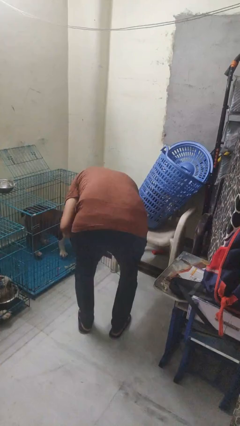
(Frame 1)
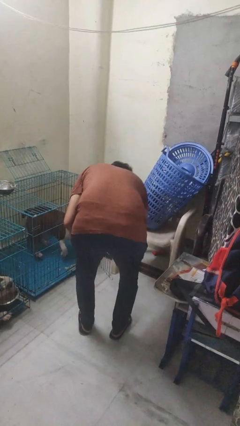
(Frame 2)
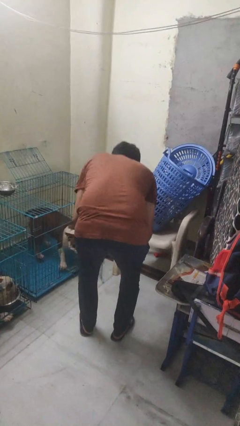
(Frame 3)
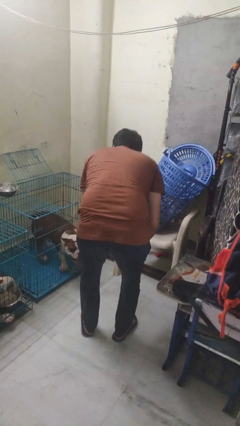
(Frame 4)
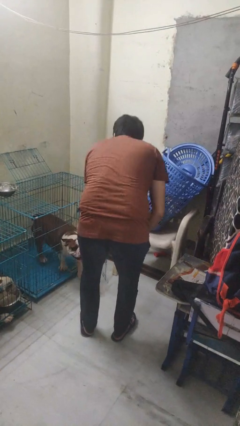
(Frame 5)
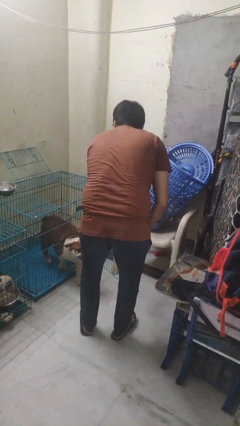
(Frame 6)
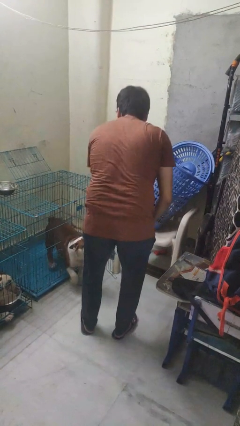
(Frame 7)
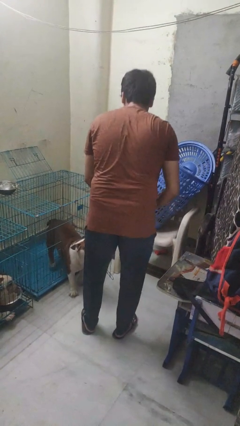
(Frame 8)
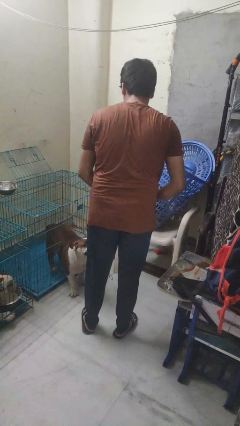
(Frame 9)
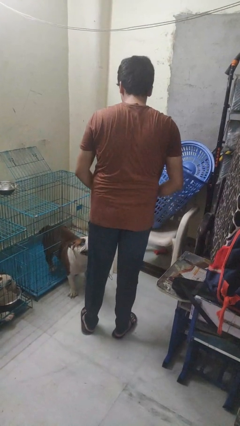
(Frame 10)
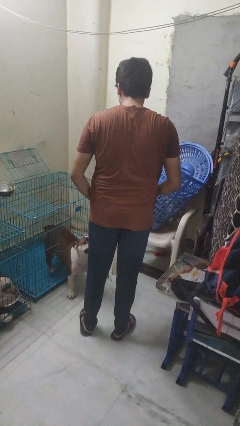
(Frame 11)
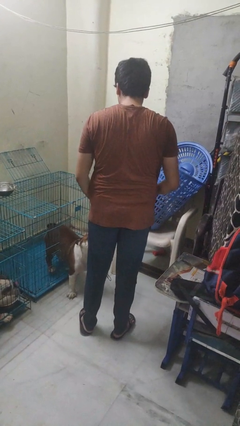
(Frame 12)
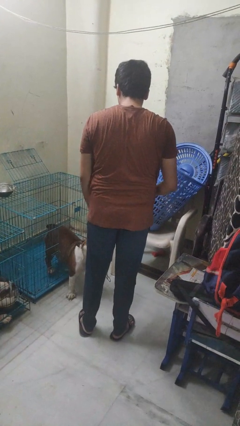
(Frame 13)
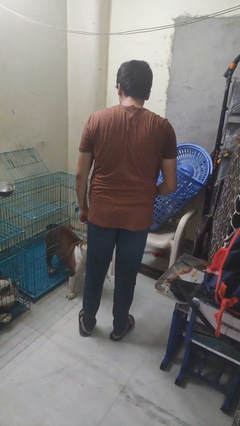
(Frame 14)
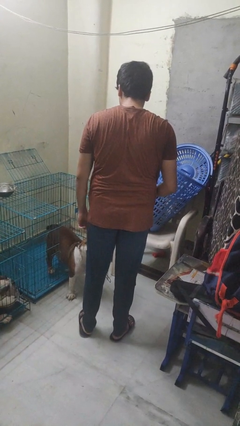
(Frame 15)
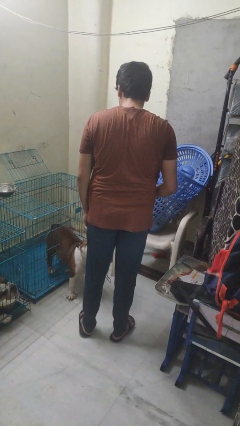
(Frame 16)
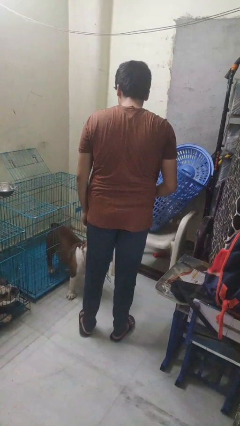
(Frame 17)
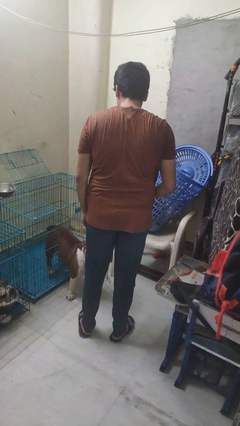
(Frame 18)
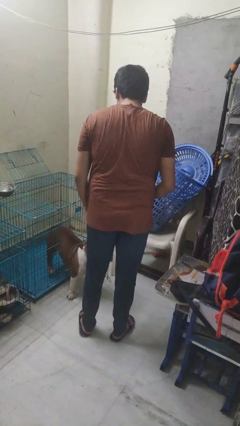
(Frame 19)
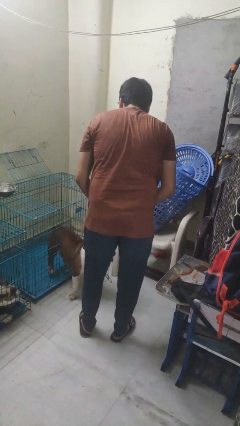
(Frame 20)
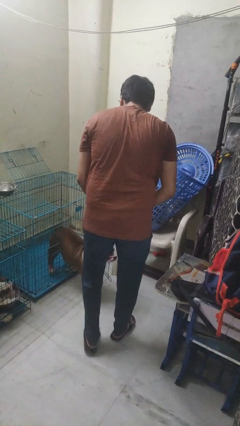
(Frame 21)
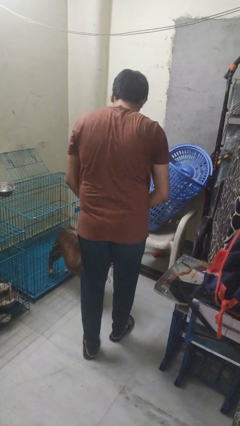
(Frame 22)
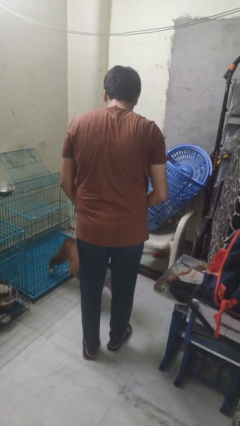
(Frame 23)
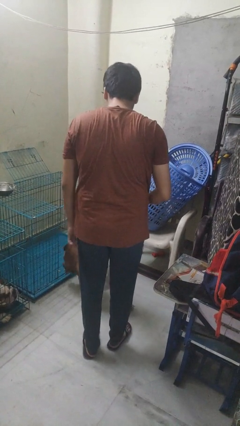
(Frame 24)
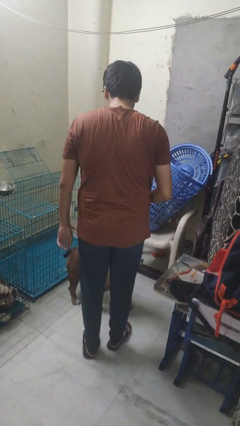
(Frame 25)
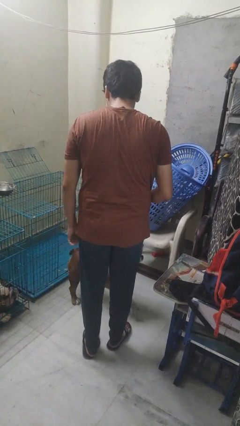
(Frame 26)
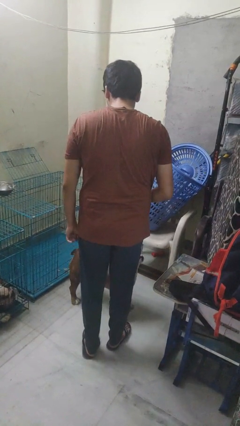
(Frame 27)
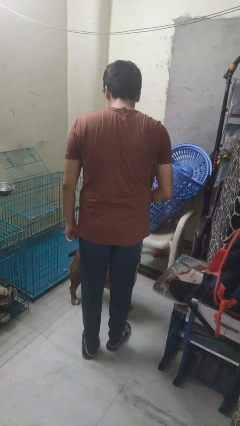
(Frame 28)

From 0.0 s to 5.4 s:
person uncrates dog

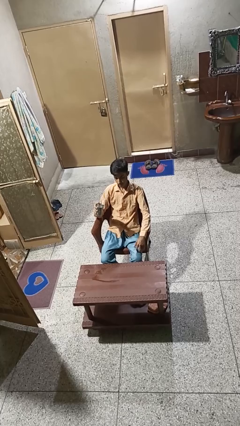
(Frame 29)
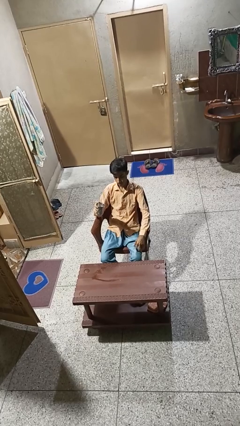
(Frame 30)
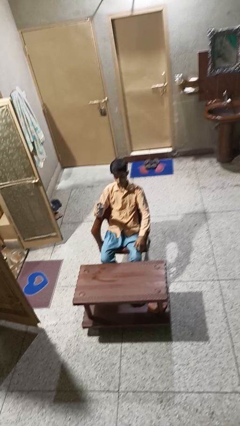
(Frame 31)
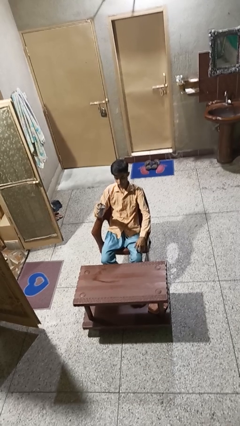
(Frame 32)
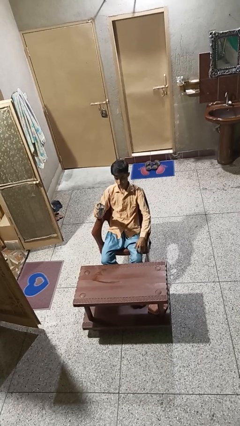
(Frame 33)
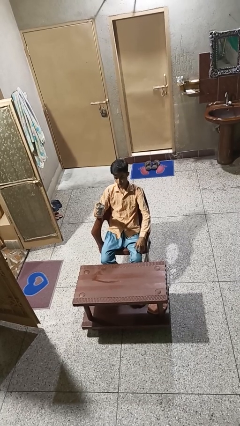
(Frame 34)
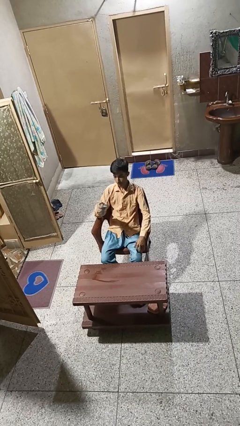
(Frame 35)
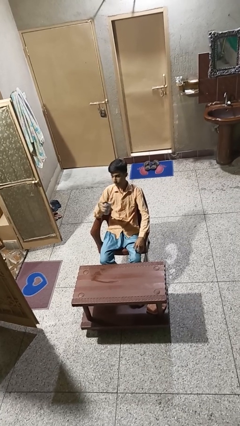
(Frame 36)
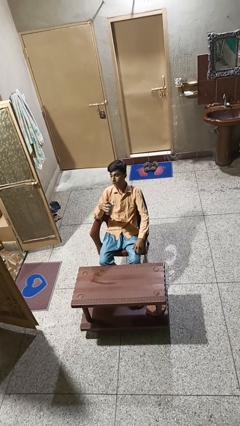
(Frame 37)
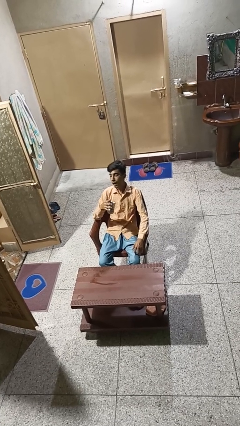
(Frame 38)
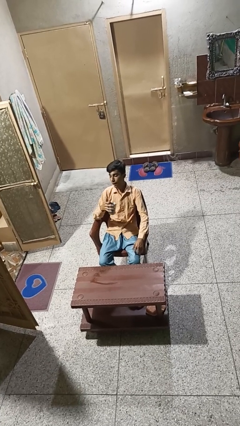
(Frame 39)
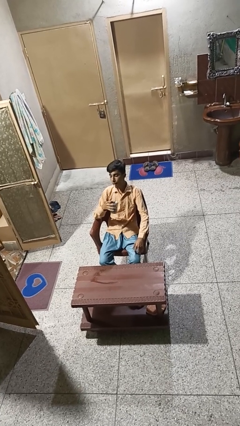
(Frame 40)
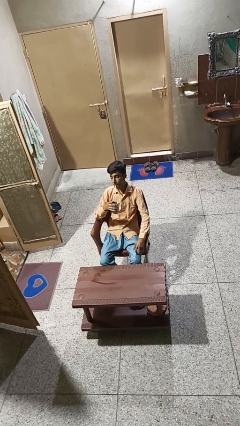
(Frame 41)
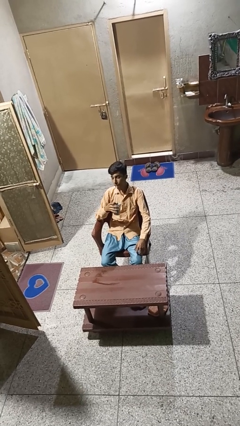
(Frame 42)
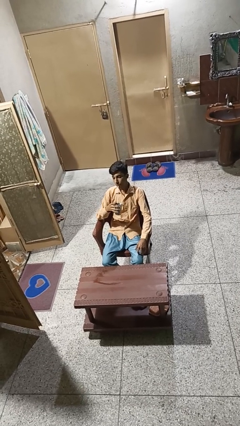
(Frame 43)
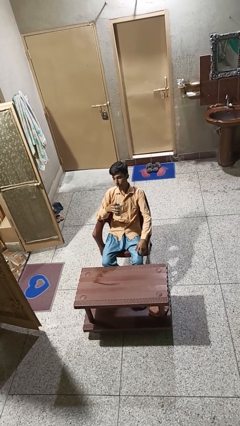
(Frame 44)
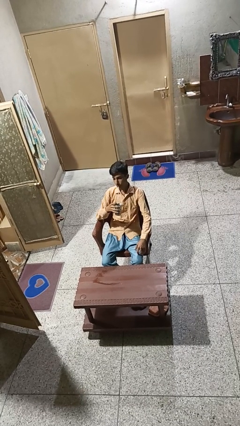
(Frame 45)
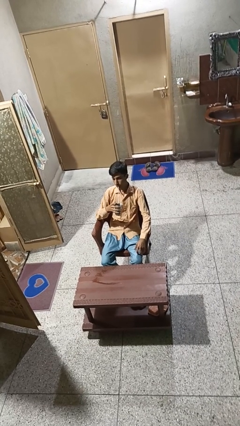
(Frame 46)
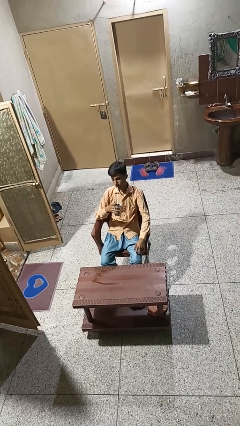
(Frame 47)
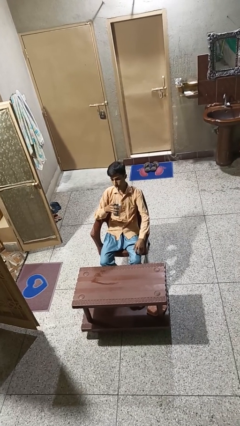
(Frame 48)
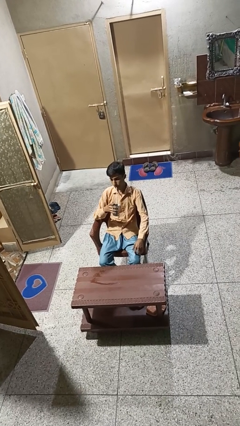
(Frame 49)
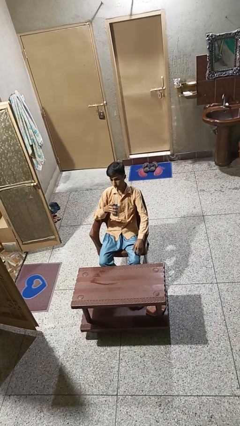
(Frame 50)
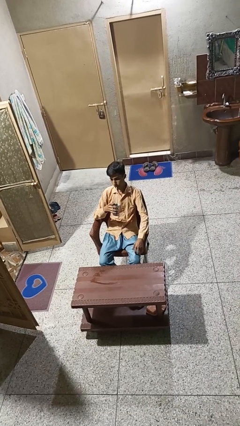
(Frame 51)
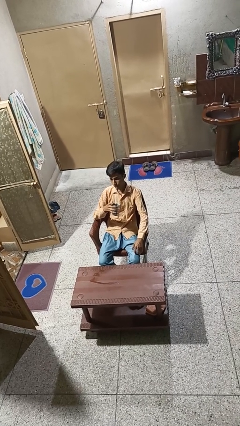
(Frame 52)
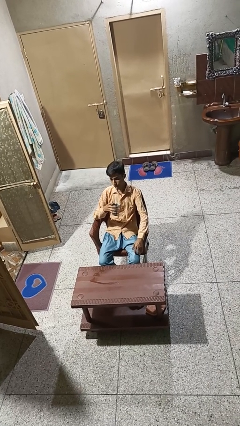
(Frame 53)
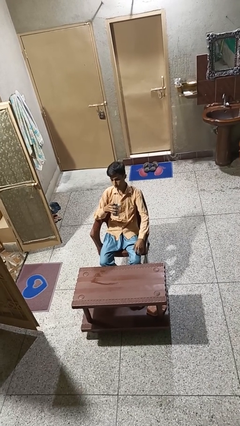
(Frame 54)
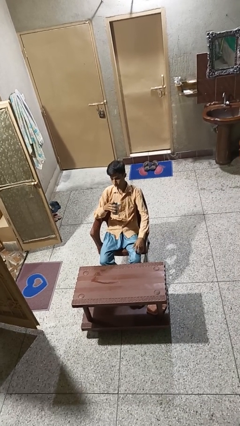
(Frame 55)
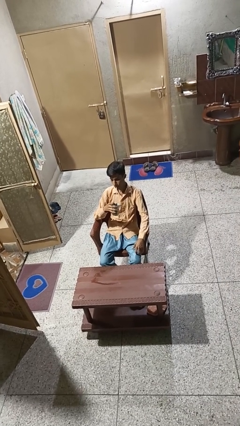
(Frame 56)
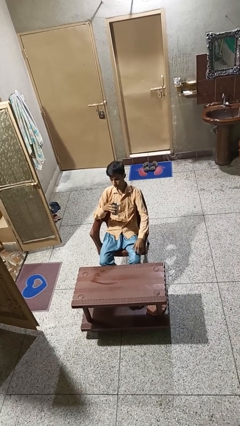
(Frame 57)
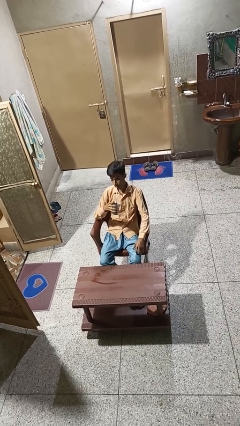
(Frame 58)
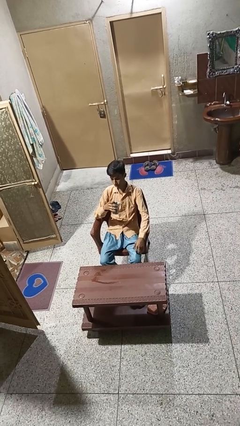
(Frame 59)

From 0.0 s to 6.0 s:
person drinks from straw

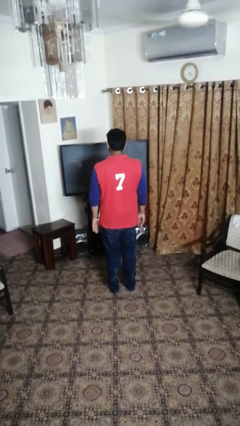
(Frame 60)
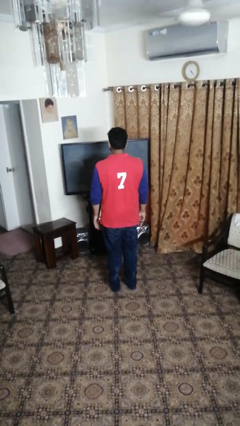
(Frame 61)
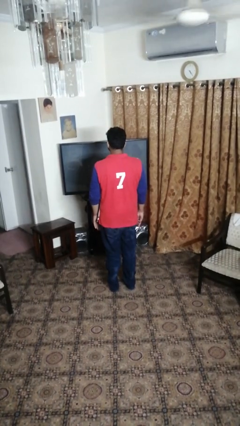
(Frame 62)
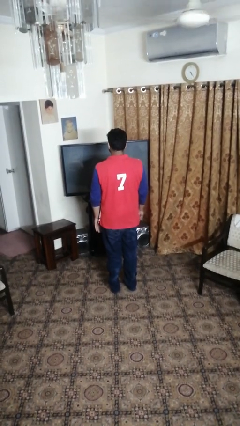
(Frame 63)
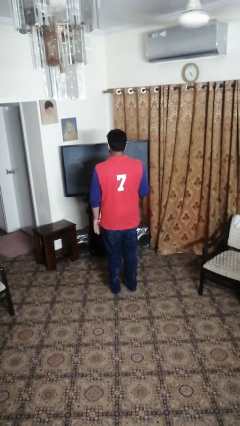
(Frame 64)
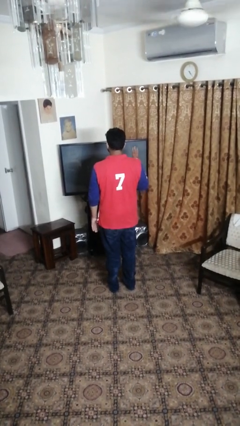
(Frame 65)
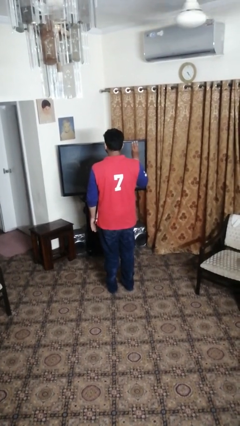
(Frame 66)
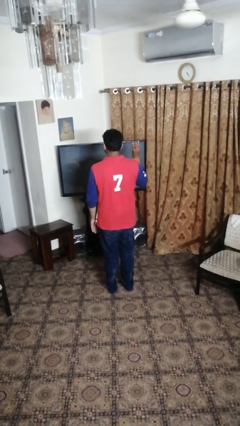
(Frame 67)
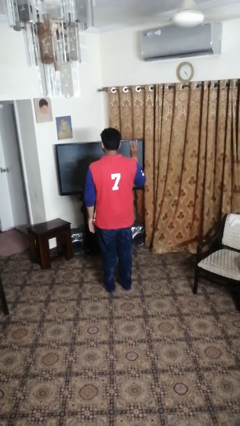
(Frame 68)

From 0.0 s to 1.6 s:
person gestures number three

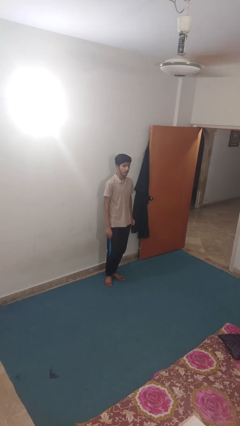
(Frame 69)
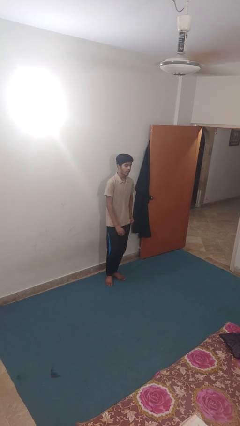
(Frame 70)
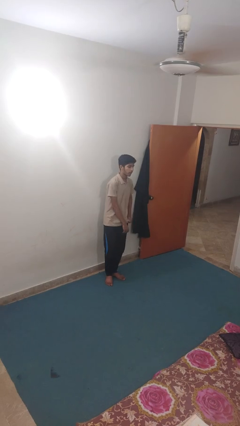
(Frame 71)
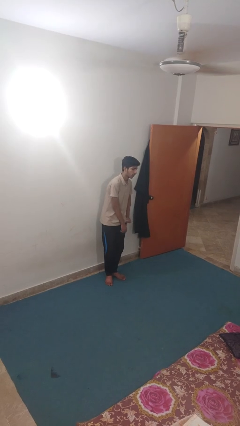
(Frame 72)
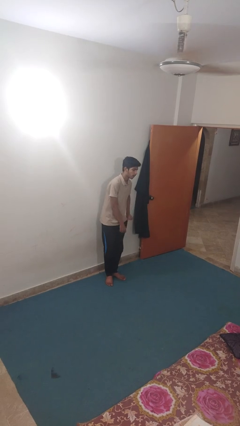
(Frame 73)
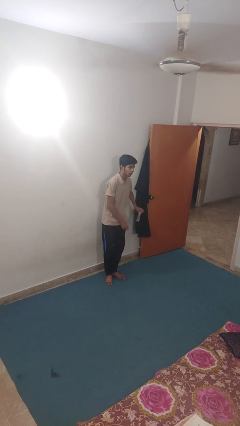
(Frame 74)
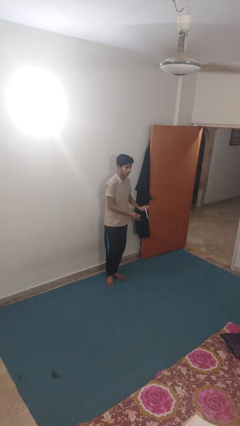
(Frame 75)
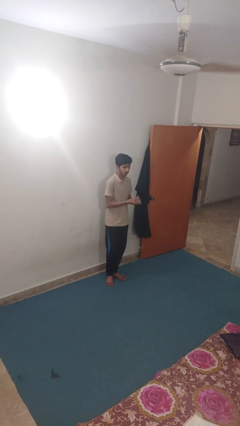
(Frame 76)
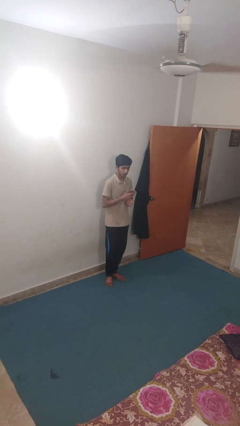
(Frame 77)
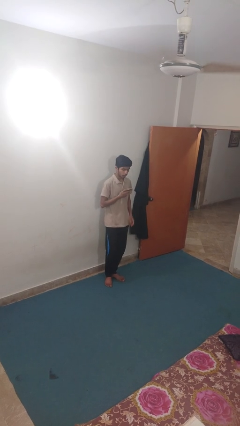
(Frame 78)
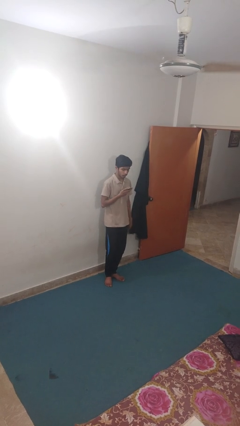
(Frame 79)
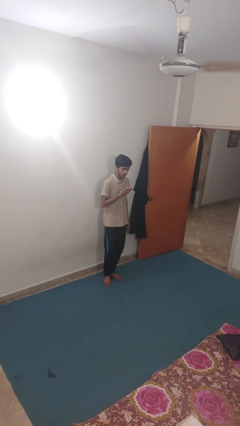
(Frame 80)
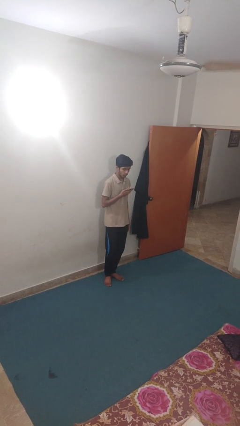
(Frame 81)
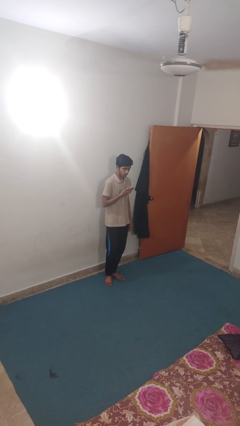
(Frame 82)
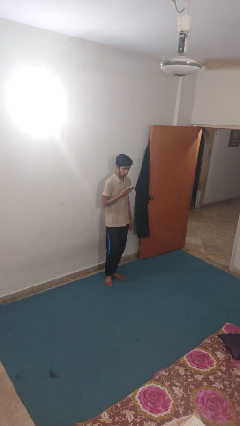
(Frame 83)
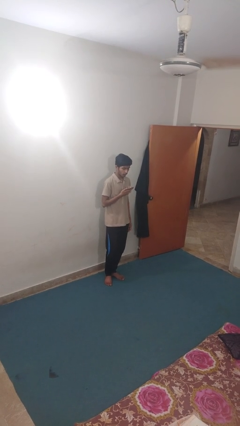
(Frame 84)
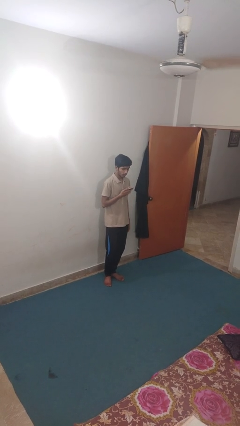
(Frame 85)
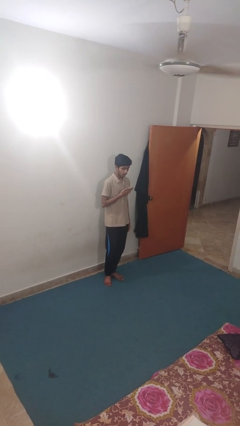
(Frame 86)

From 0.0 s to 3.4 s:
person takes phone from pocket

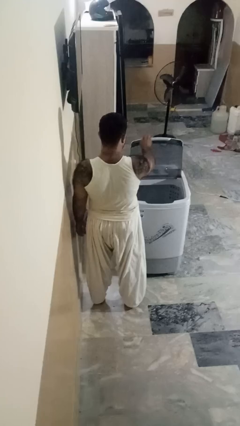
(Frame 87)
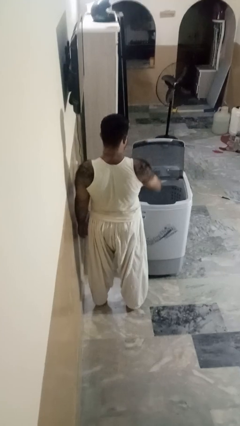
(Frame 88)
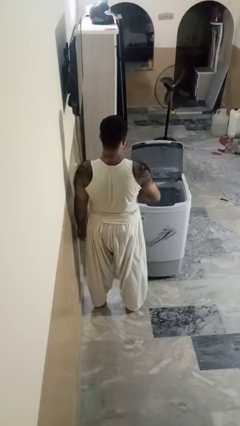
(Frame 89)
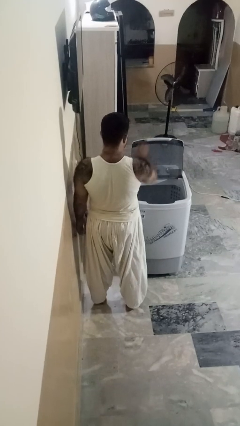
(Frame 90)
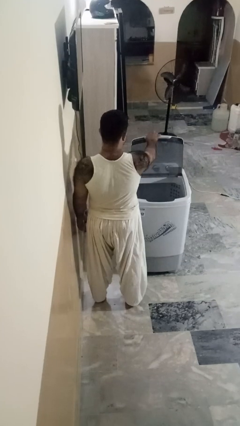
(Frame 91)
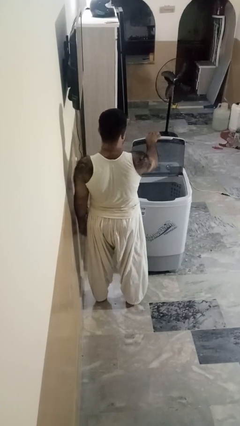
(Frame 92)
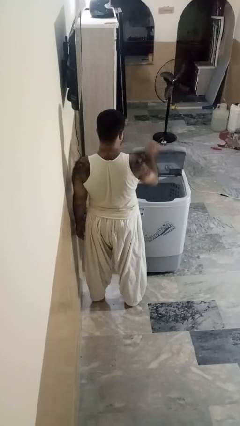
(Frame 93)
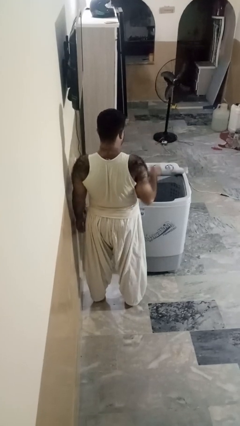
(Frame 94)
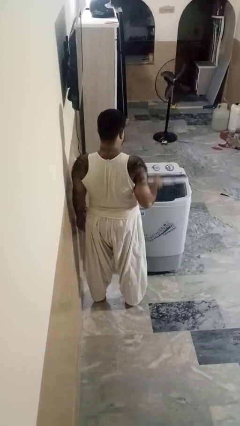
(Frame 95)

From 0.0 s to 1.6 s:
person closes clothes washer
